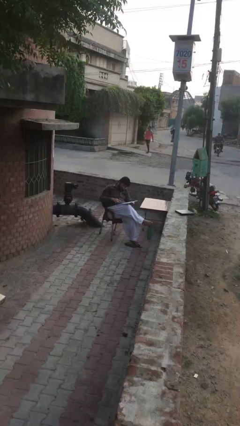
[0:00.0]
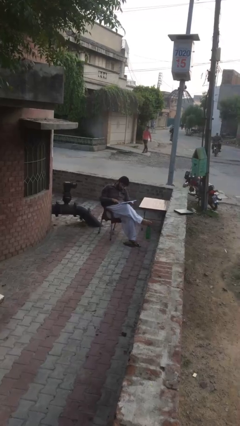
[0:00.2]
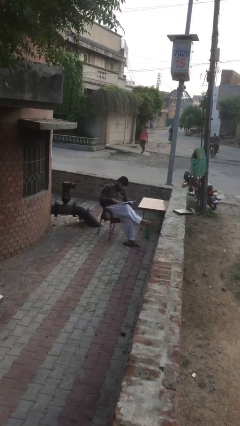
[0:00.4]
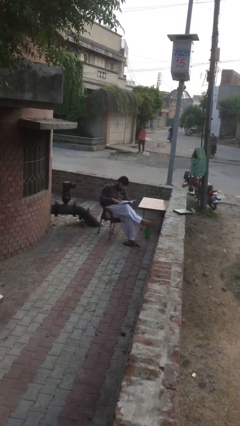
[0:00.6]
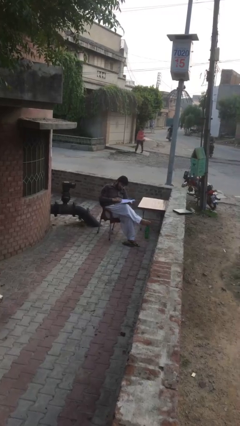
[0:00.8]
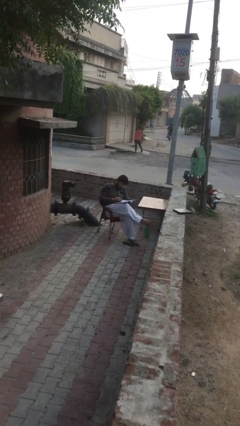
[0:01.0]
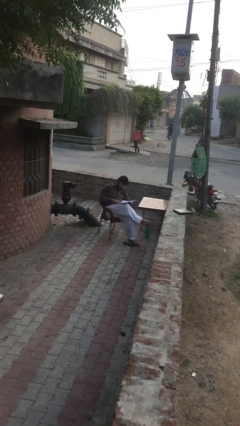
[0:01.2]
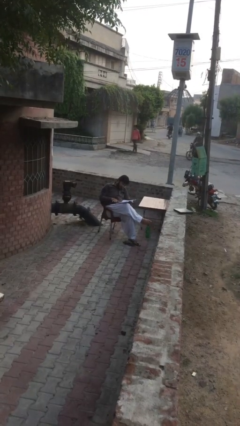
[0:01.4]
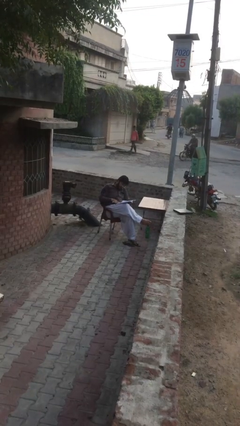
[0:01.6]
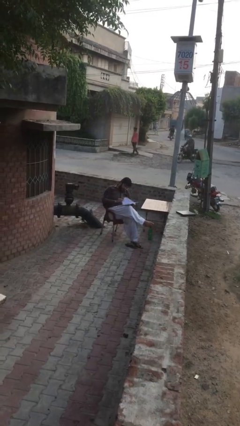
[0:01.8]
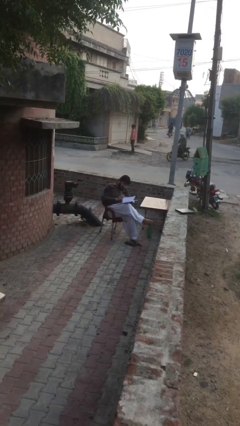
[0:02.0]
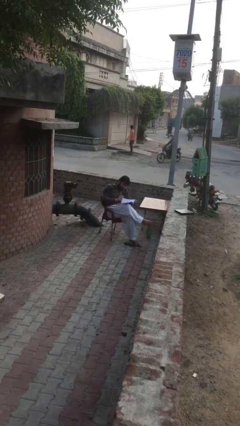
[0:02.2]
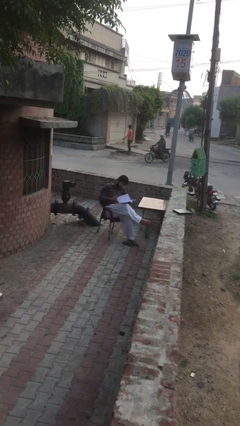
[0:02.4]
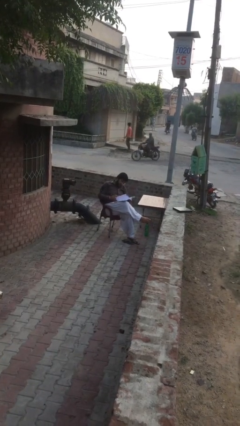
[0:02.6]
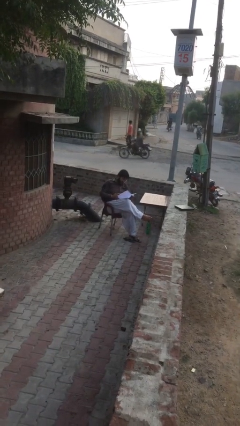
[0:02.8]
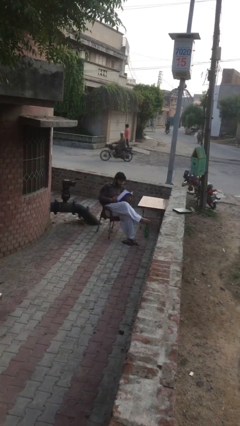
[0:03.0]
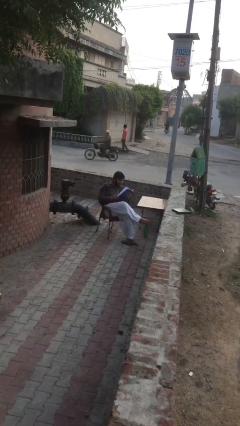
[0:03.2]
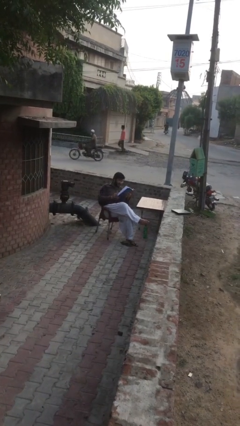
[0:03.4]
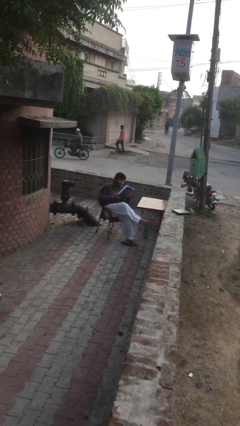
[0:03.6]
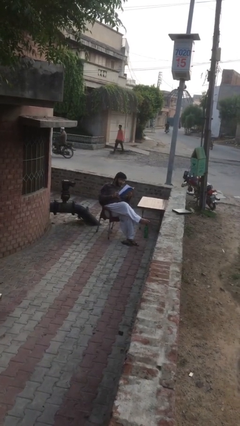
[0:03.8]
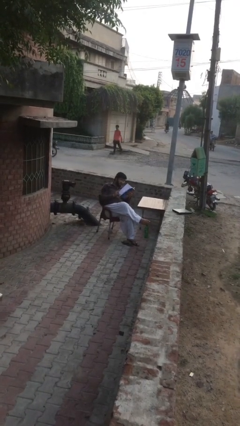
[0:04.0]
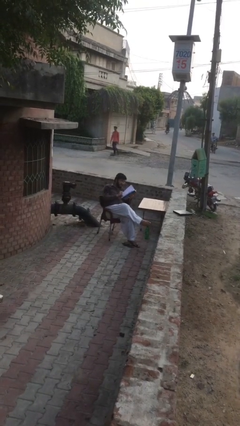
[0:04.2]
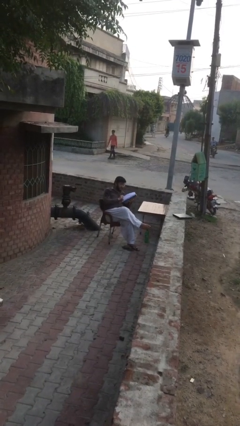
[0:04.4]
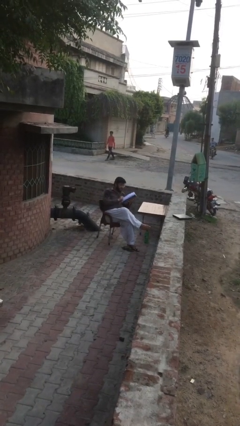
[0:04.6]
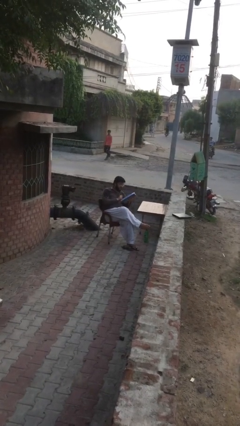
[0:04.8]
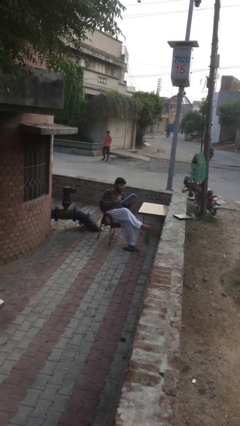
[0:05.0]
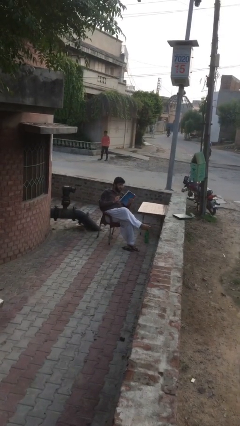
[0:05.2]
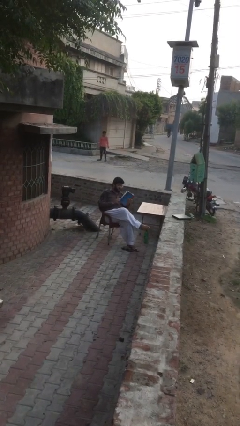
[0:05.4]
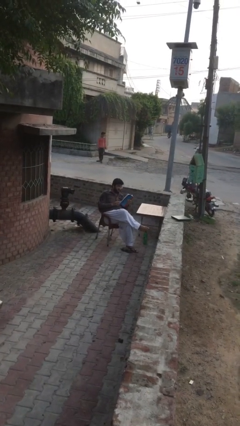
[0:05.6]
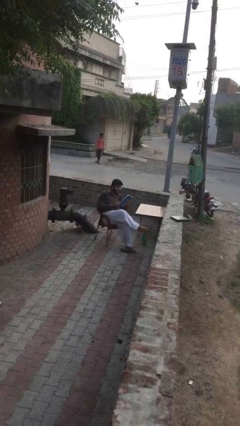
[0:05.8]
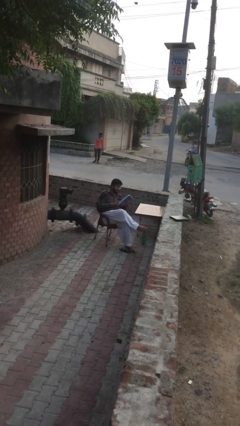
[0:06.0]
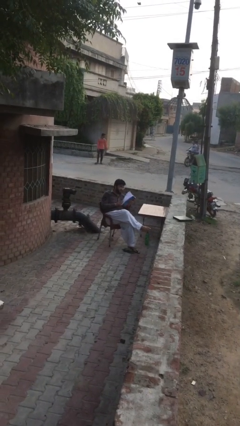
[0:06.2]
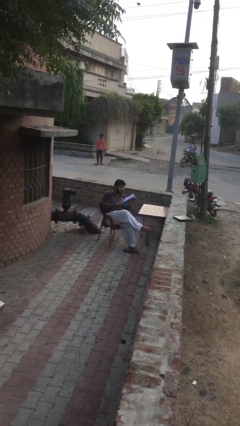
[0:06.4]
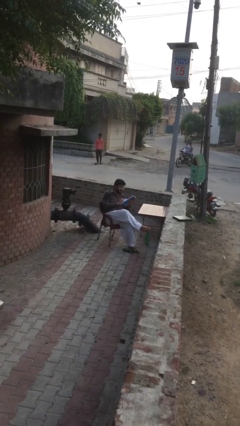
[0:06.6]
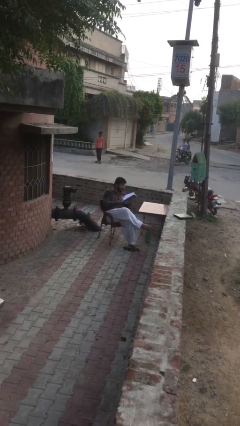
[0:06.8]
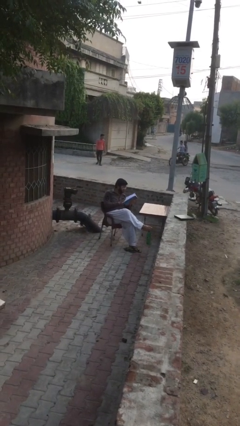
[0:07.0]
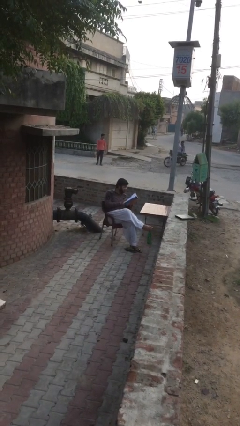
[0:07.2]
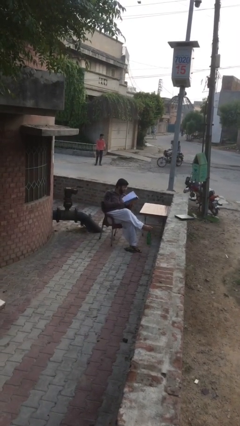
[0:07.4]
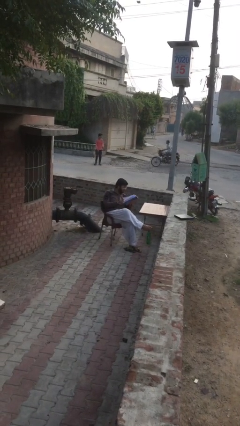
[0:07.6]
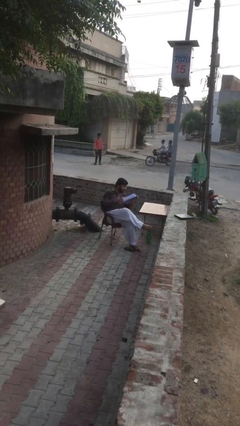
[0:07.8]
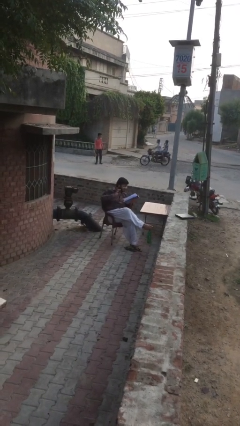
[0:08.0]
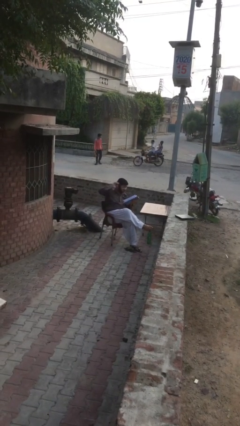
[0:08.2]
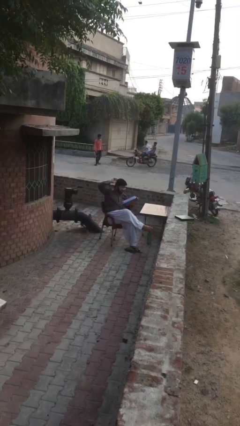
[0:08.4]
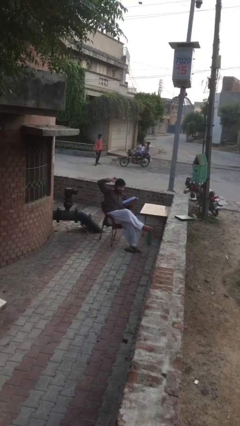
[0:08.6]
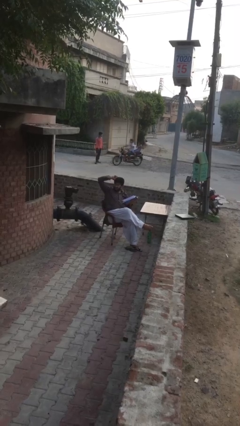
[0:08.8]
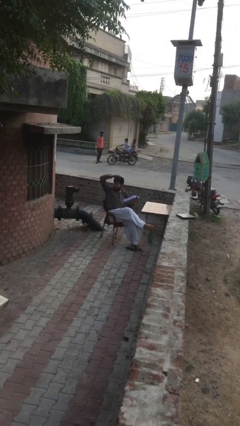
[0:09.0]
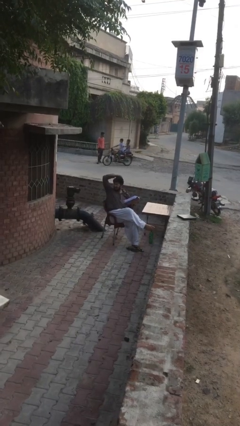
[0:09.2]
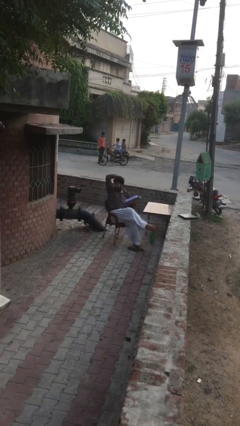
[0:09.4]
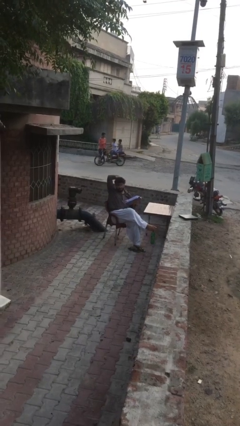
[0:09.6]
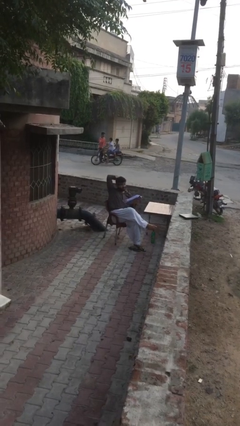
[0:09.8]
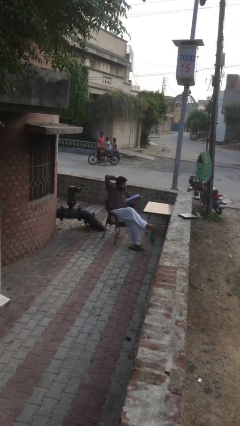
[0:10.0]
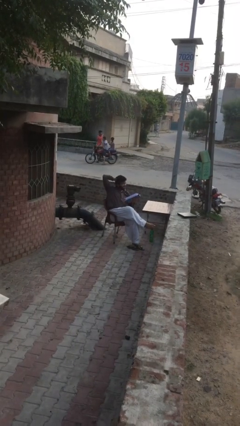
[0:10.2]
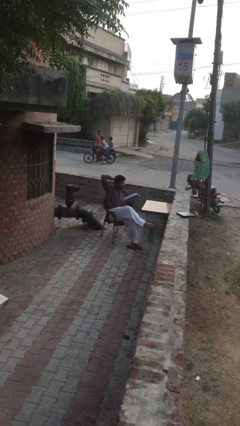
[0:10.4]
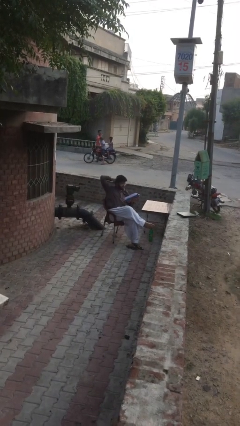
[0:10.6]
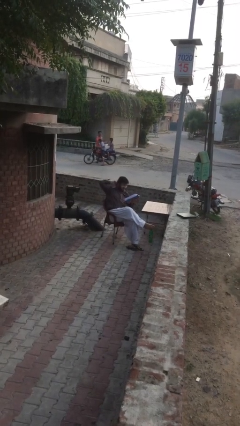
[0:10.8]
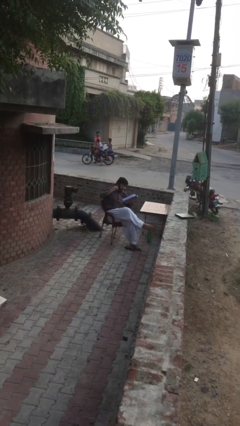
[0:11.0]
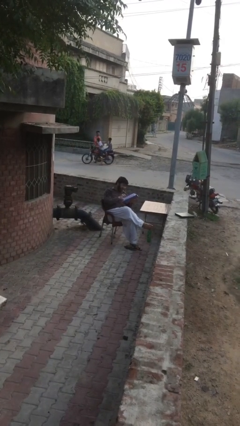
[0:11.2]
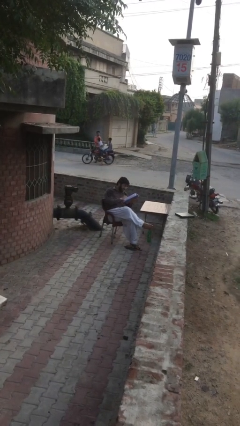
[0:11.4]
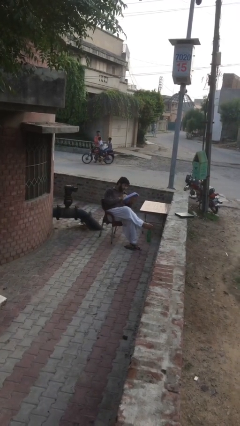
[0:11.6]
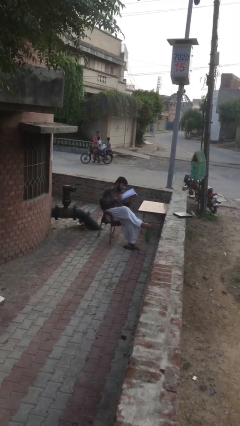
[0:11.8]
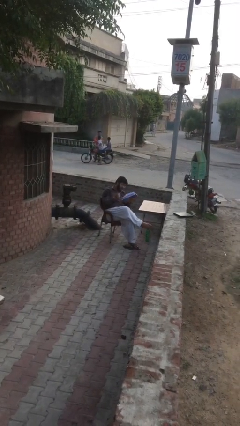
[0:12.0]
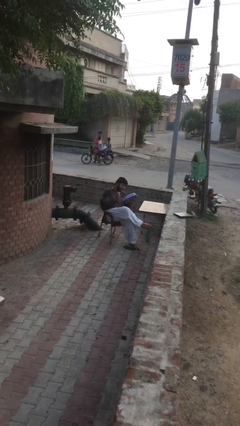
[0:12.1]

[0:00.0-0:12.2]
person reads document

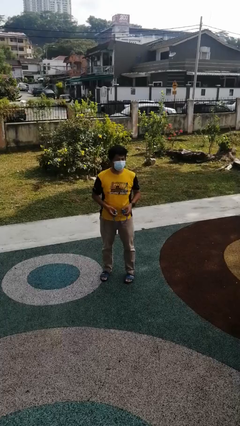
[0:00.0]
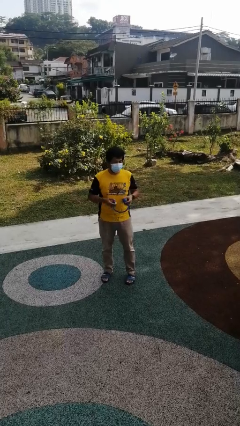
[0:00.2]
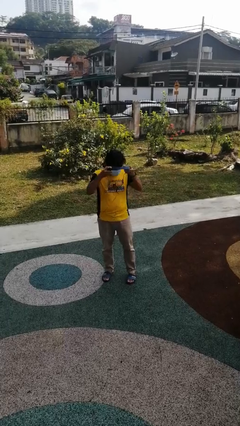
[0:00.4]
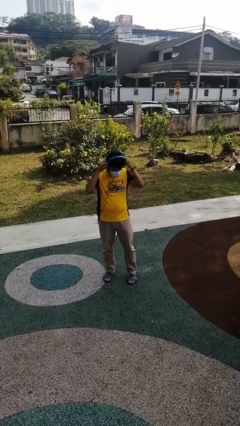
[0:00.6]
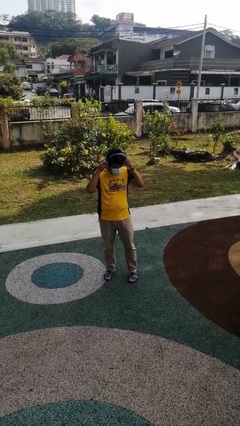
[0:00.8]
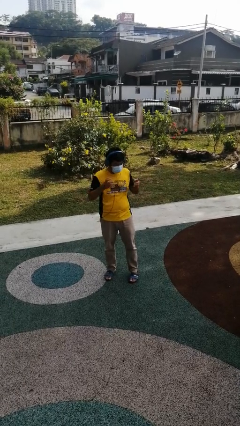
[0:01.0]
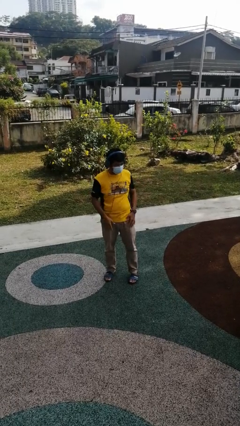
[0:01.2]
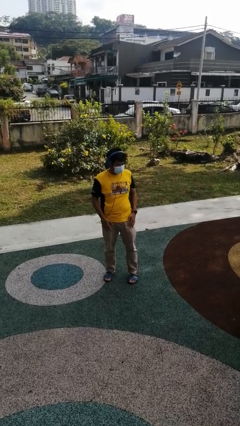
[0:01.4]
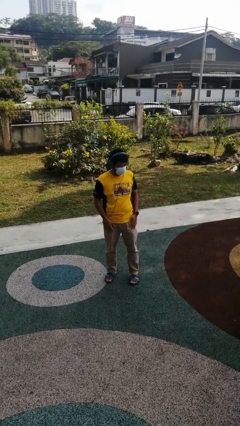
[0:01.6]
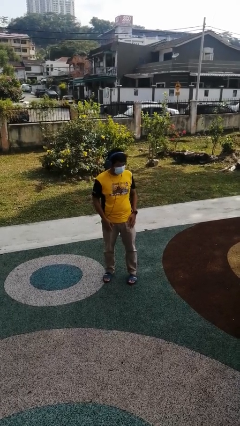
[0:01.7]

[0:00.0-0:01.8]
person puts on headphones

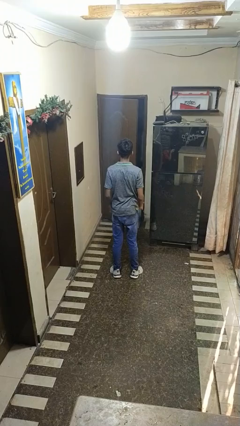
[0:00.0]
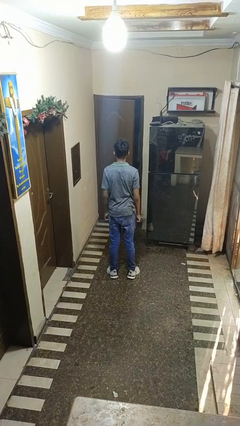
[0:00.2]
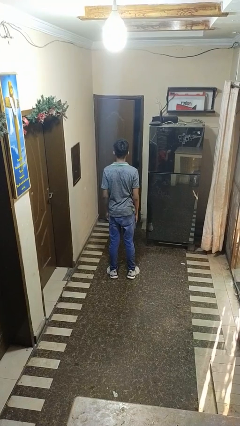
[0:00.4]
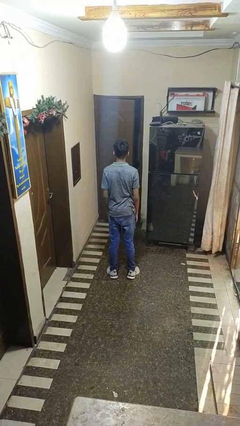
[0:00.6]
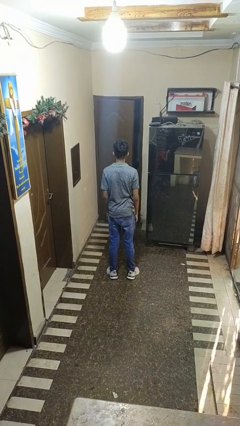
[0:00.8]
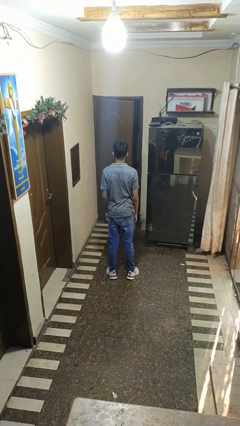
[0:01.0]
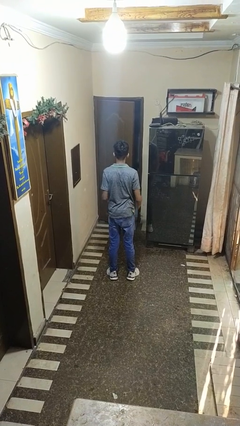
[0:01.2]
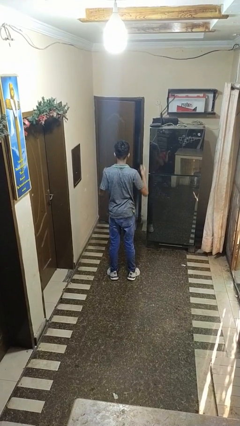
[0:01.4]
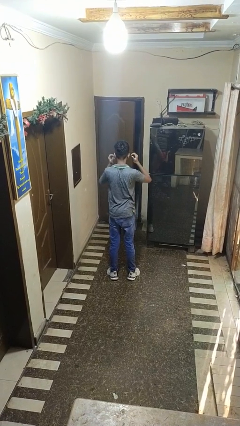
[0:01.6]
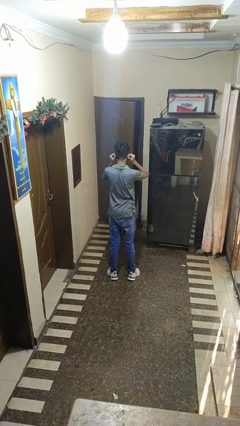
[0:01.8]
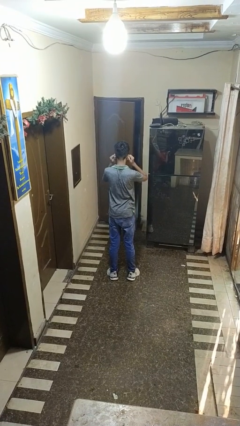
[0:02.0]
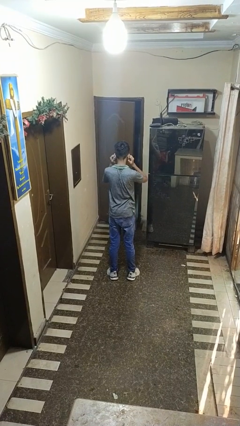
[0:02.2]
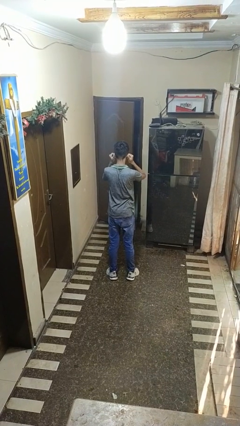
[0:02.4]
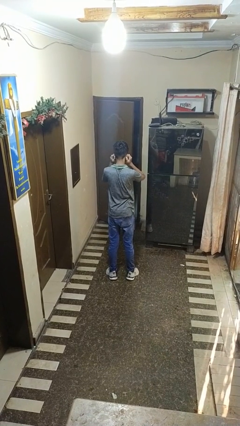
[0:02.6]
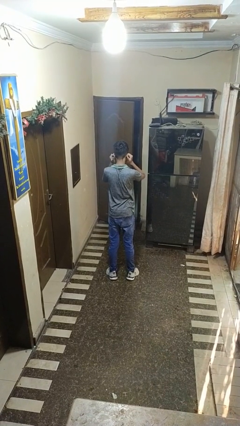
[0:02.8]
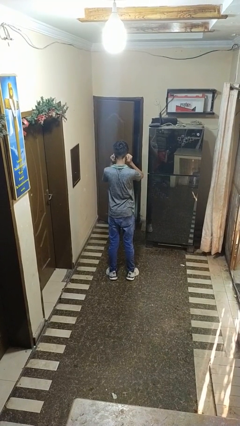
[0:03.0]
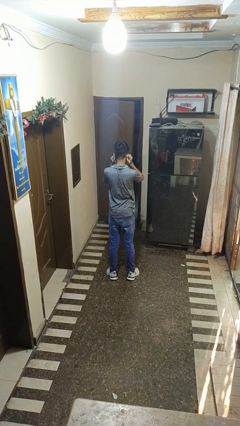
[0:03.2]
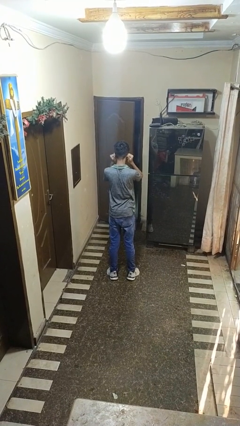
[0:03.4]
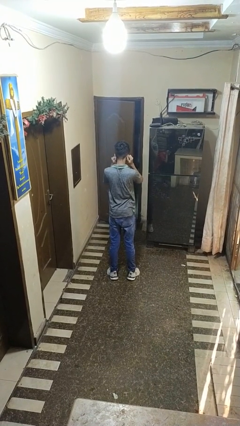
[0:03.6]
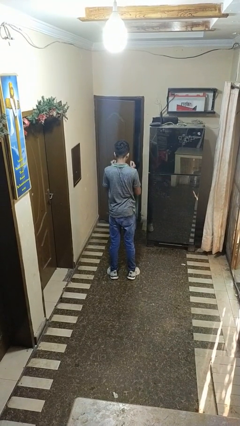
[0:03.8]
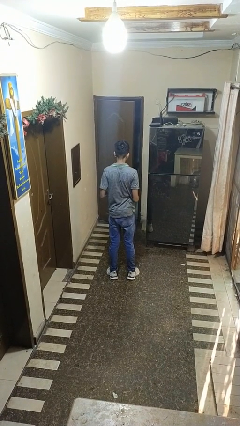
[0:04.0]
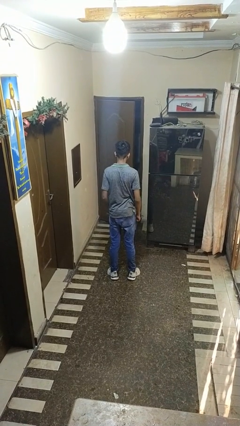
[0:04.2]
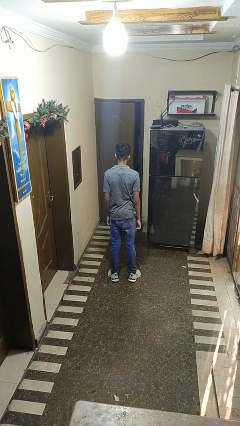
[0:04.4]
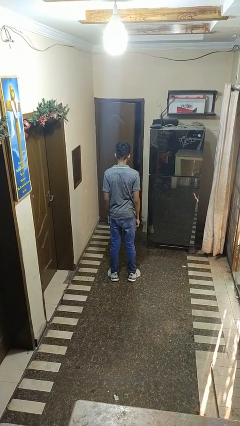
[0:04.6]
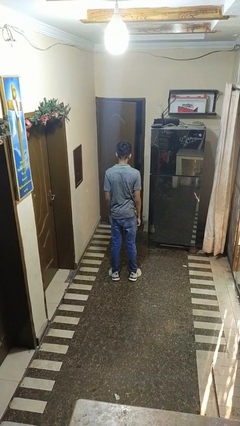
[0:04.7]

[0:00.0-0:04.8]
person touches earlobe
